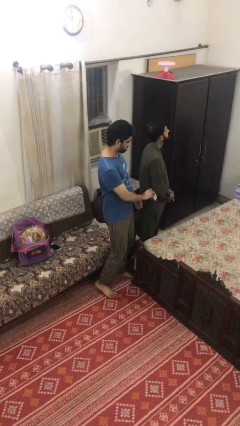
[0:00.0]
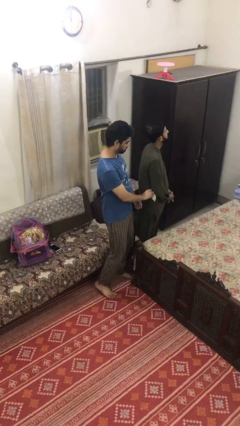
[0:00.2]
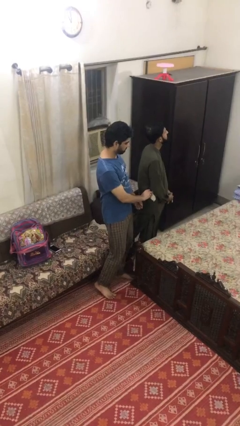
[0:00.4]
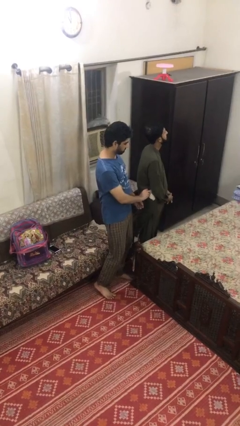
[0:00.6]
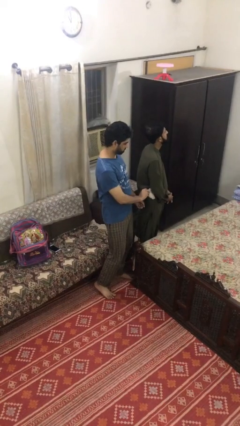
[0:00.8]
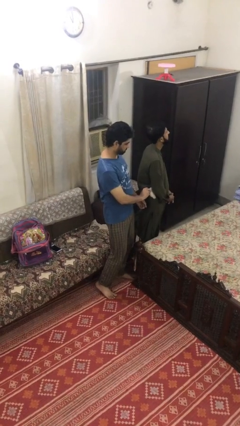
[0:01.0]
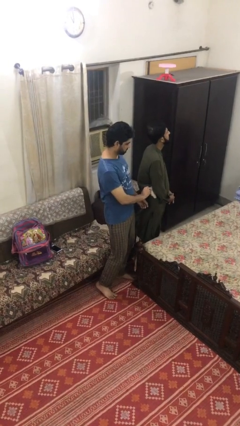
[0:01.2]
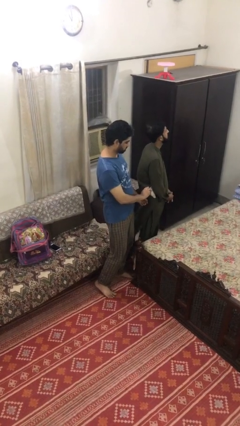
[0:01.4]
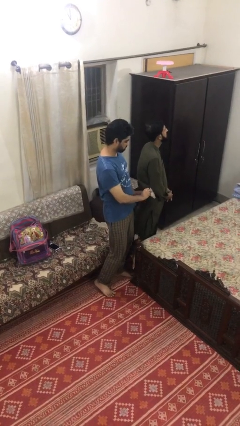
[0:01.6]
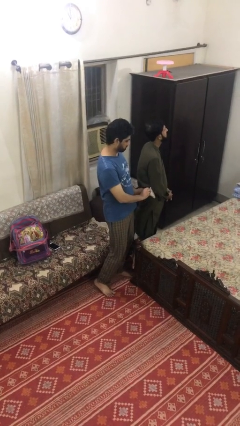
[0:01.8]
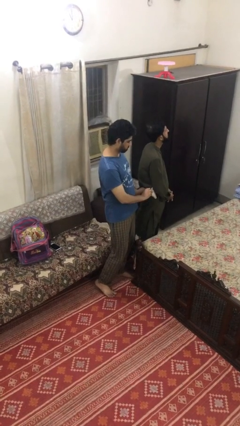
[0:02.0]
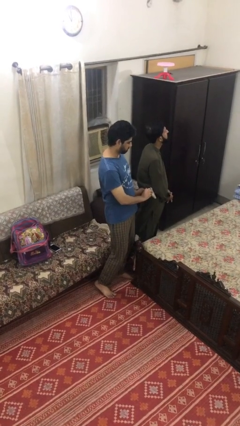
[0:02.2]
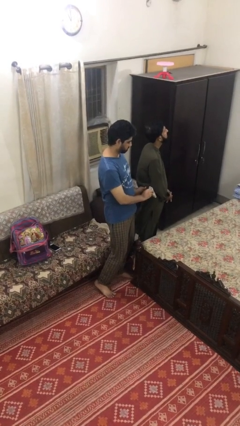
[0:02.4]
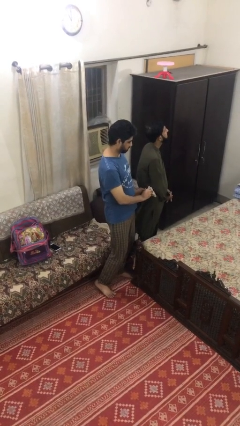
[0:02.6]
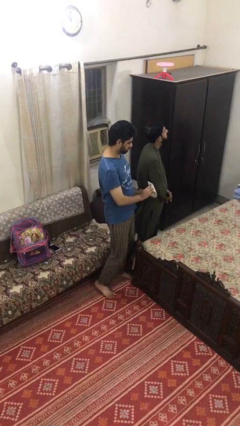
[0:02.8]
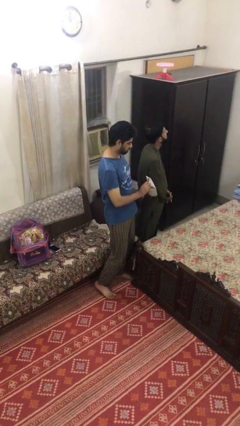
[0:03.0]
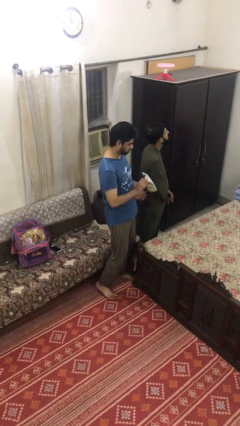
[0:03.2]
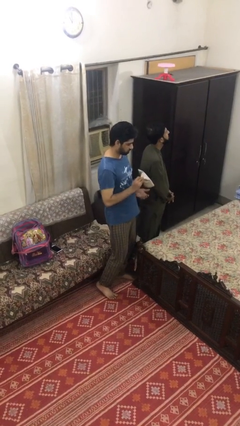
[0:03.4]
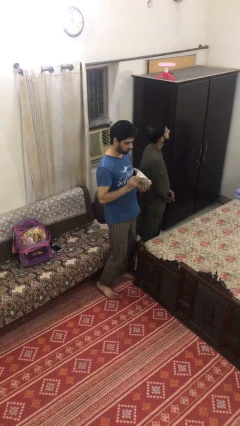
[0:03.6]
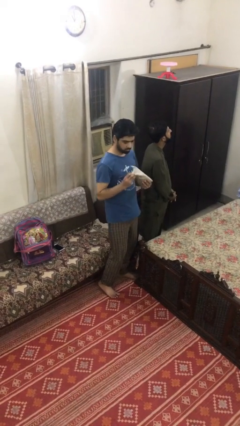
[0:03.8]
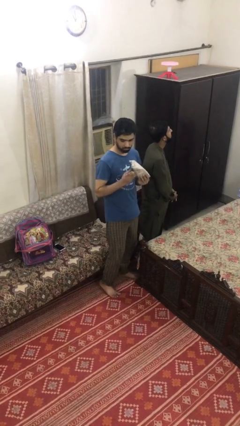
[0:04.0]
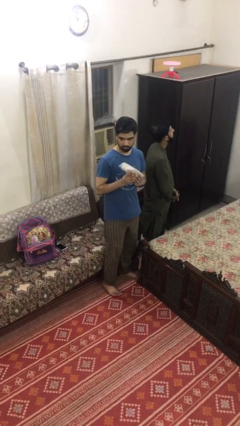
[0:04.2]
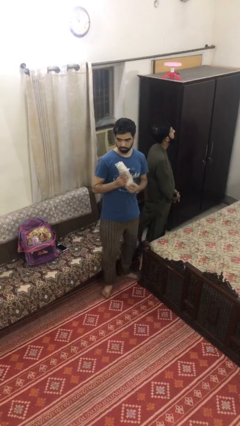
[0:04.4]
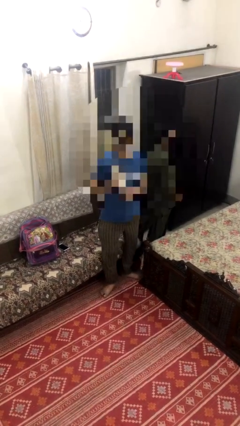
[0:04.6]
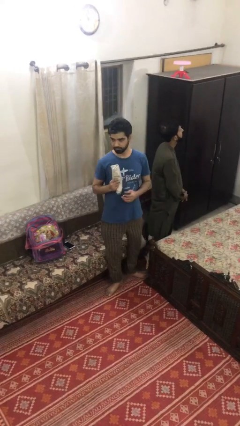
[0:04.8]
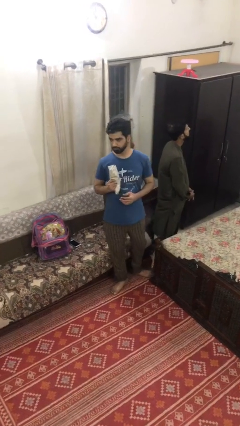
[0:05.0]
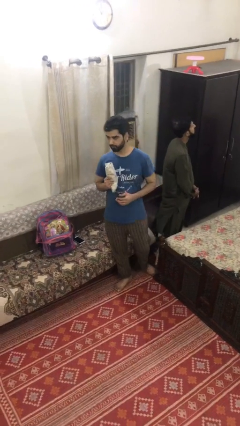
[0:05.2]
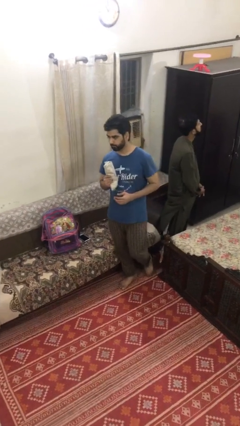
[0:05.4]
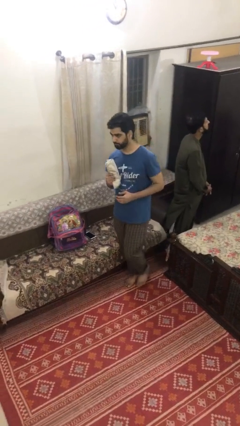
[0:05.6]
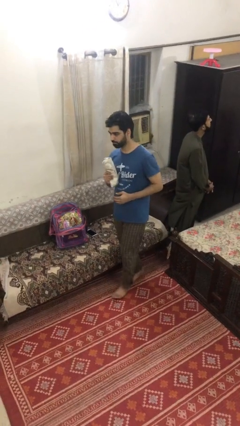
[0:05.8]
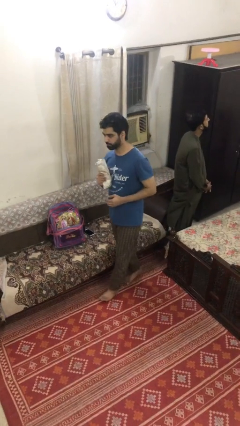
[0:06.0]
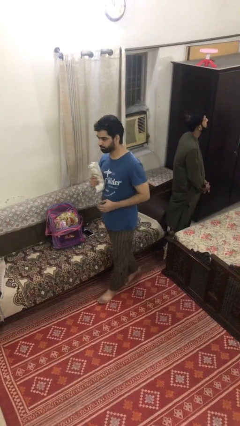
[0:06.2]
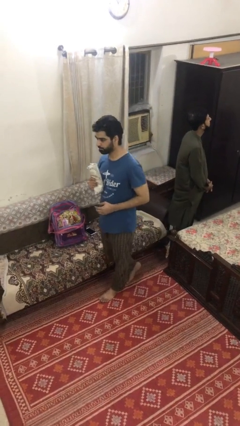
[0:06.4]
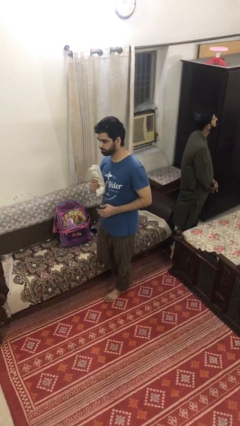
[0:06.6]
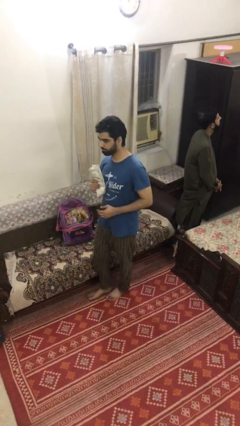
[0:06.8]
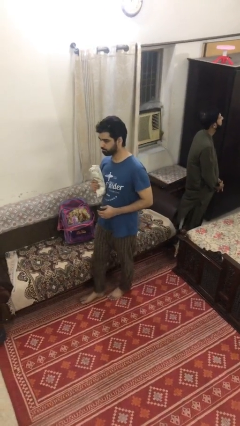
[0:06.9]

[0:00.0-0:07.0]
person steals object from person

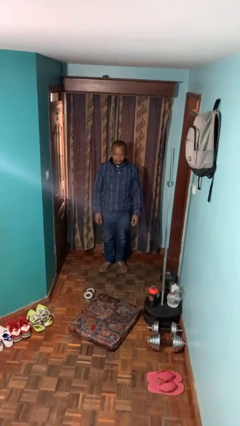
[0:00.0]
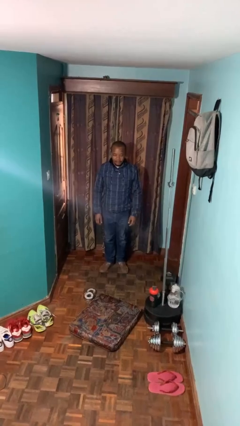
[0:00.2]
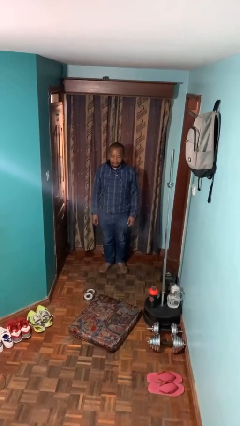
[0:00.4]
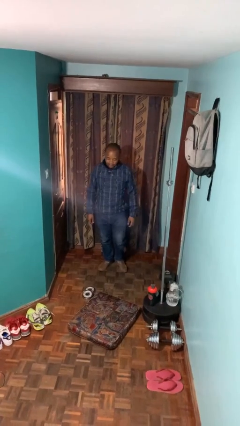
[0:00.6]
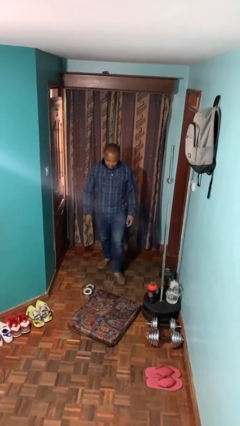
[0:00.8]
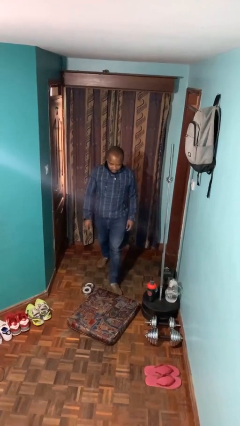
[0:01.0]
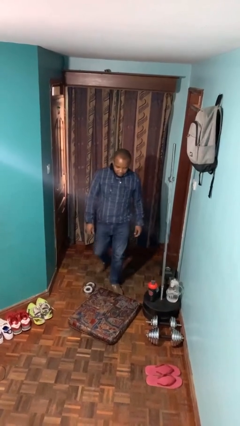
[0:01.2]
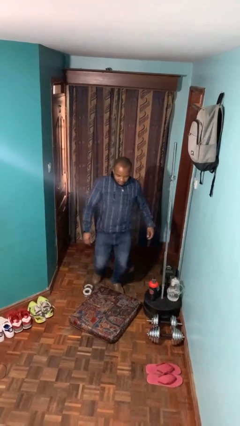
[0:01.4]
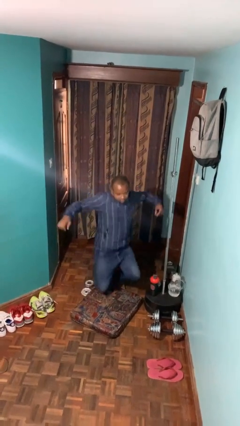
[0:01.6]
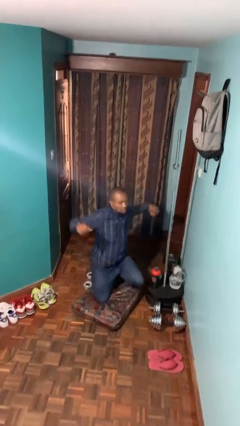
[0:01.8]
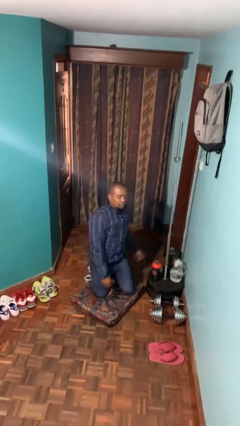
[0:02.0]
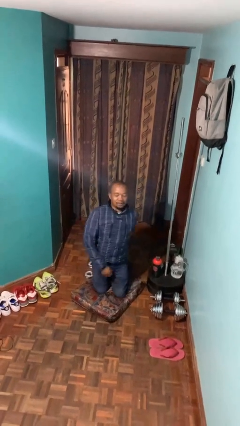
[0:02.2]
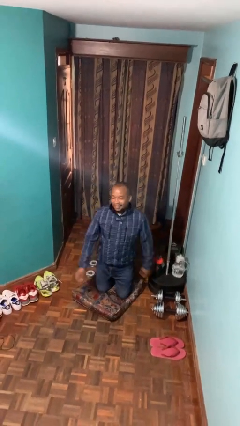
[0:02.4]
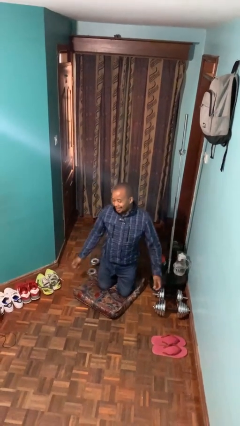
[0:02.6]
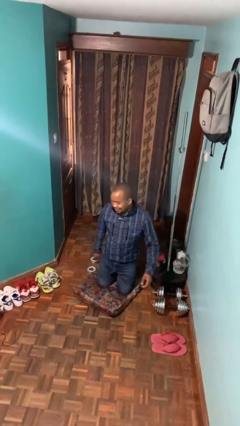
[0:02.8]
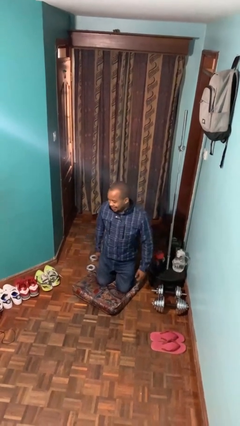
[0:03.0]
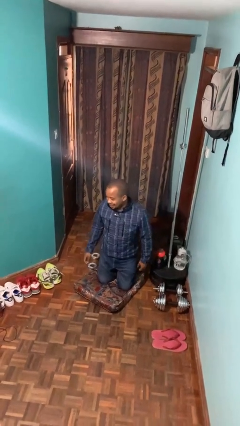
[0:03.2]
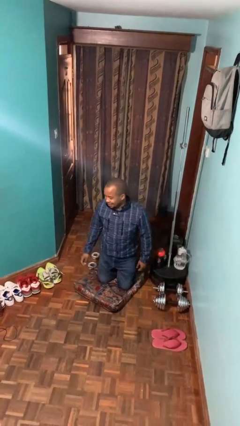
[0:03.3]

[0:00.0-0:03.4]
person trips on object on floor

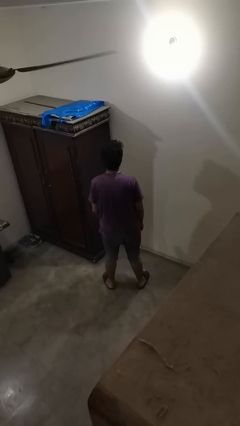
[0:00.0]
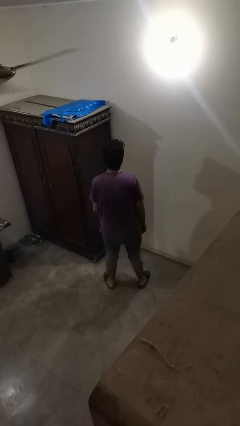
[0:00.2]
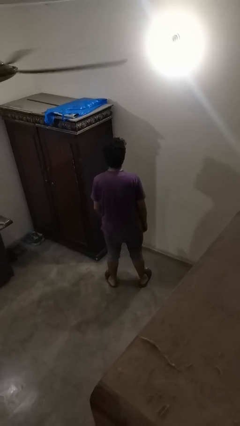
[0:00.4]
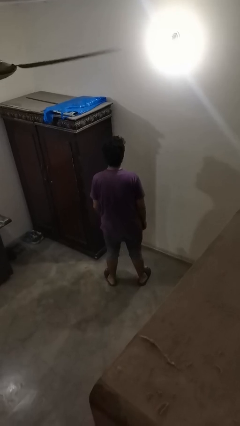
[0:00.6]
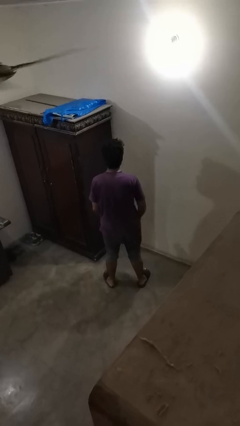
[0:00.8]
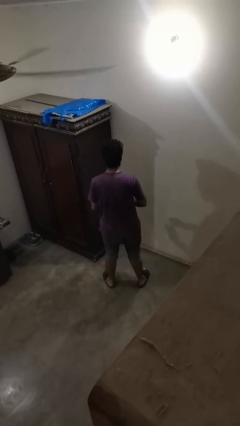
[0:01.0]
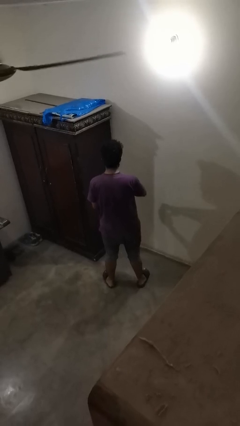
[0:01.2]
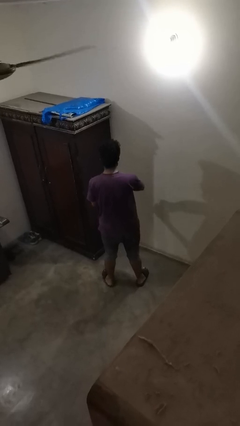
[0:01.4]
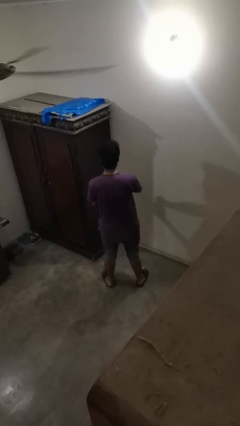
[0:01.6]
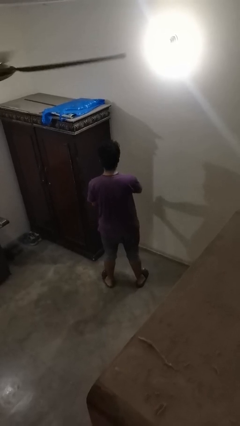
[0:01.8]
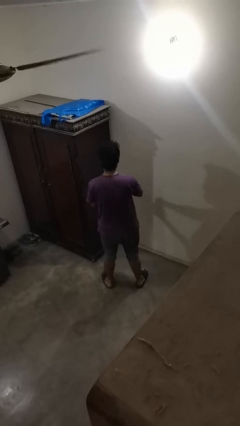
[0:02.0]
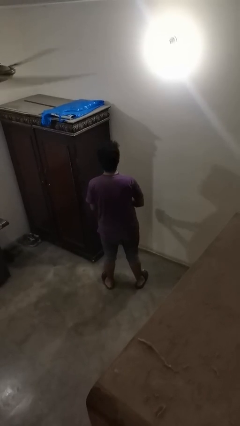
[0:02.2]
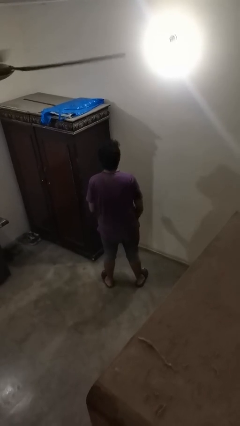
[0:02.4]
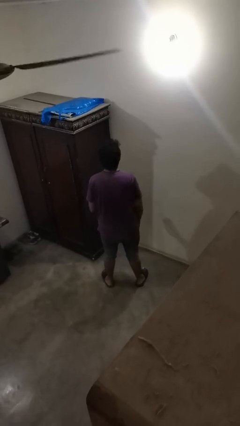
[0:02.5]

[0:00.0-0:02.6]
person opens beverage can

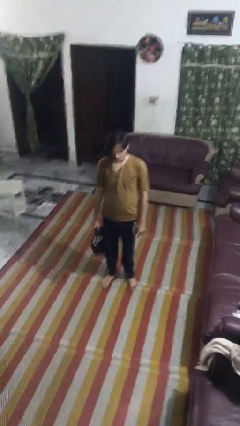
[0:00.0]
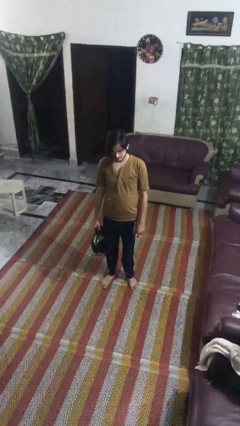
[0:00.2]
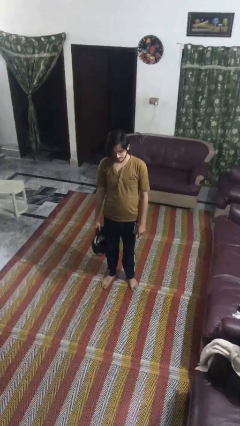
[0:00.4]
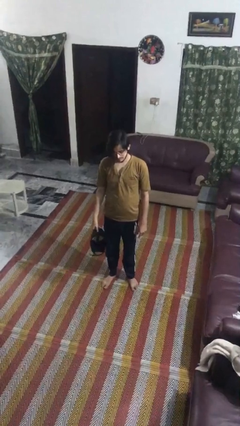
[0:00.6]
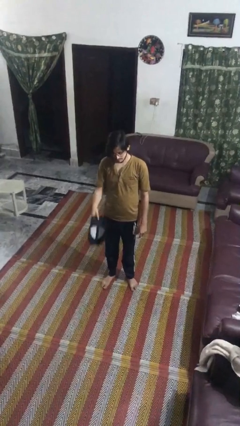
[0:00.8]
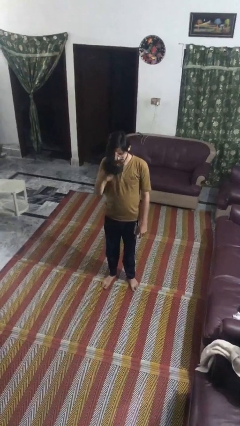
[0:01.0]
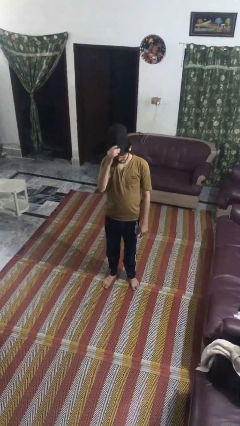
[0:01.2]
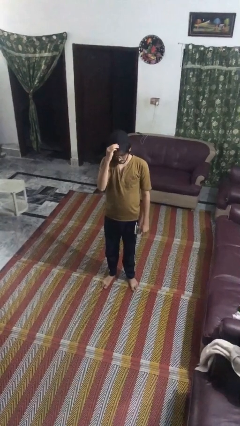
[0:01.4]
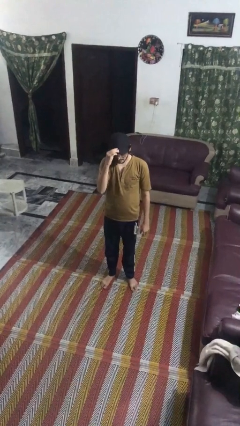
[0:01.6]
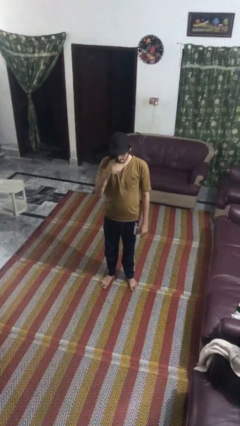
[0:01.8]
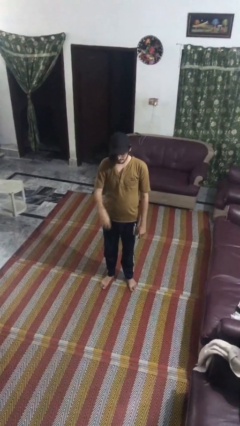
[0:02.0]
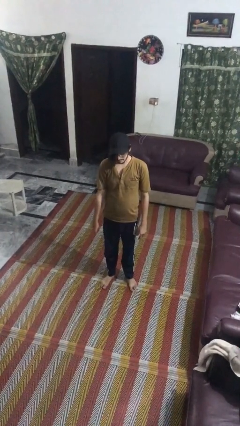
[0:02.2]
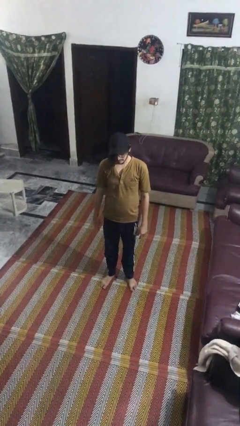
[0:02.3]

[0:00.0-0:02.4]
person puts on hat

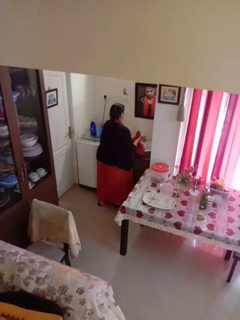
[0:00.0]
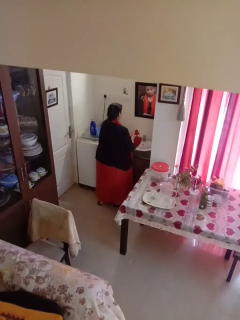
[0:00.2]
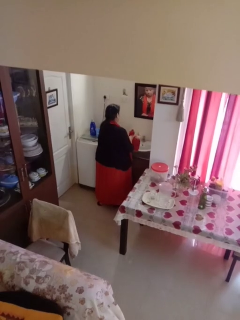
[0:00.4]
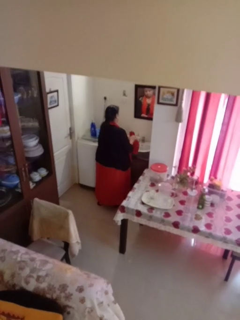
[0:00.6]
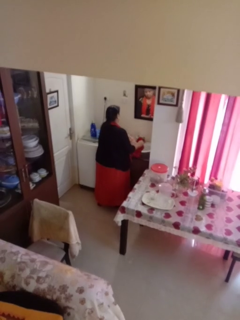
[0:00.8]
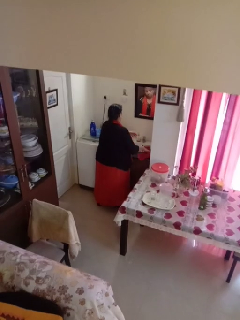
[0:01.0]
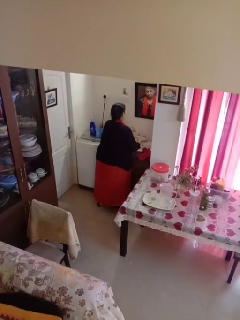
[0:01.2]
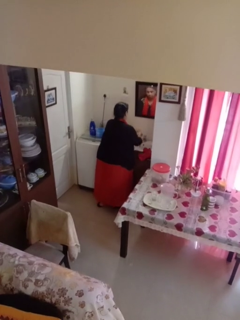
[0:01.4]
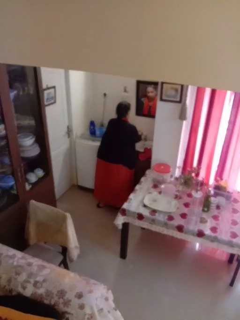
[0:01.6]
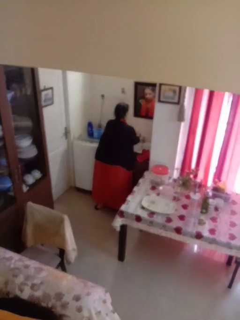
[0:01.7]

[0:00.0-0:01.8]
person dries hands with towel

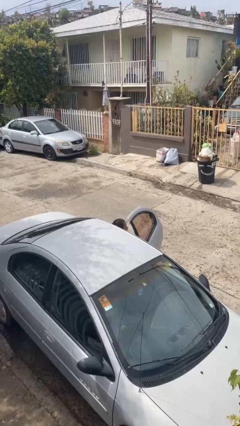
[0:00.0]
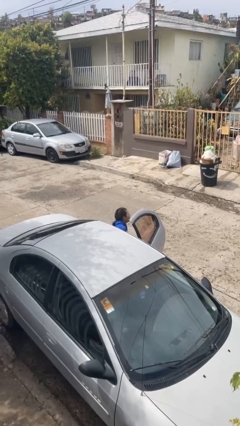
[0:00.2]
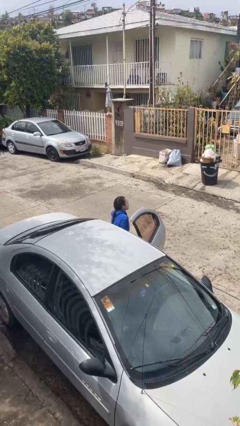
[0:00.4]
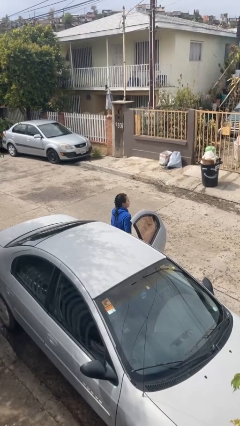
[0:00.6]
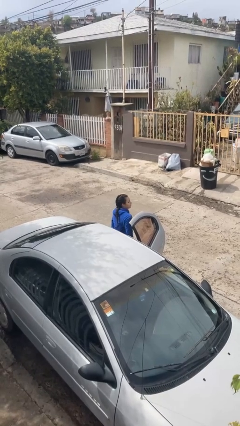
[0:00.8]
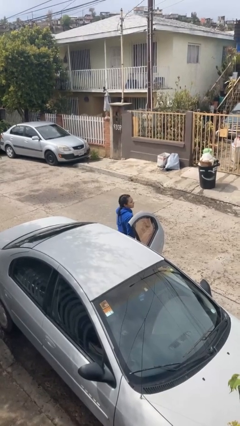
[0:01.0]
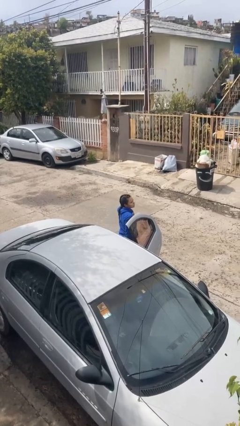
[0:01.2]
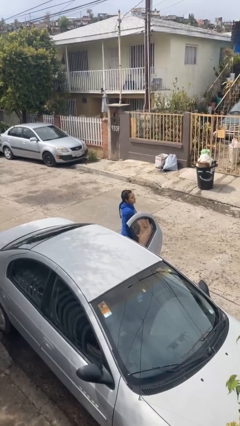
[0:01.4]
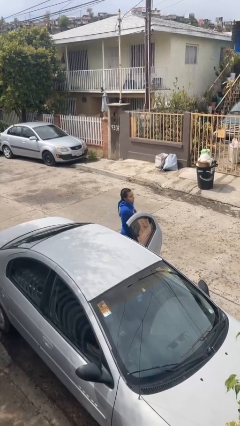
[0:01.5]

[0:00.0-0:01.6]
person exits car
